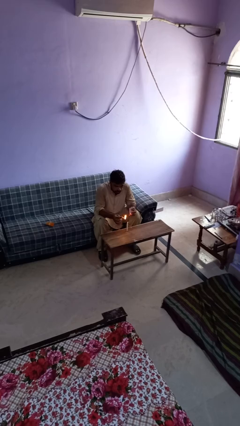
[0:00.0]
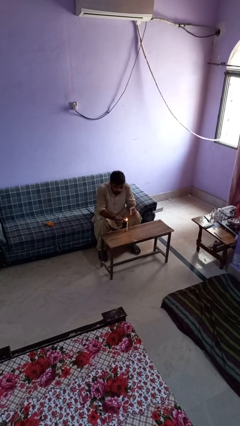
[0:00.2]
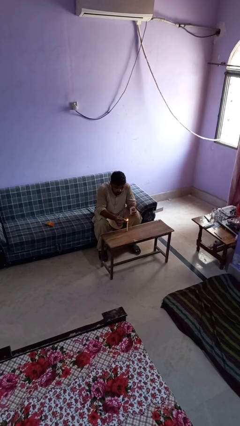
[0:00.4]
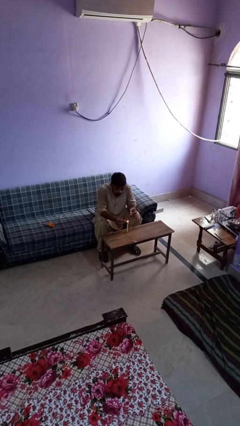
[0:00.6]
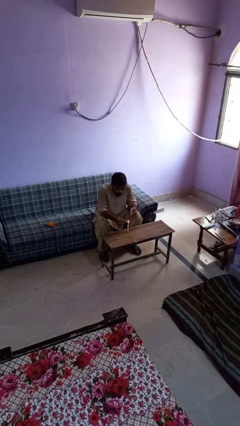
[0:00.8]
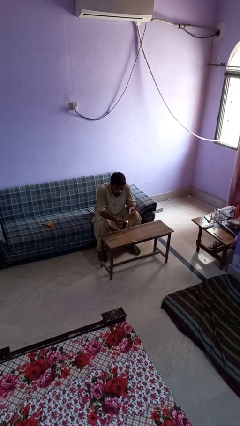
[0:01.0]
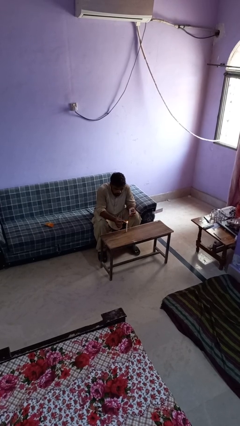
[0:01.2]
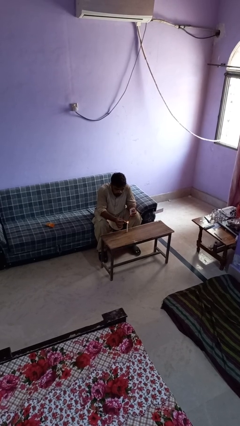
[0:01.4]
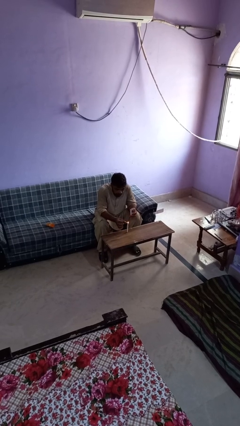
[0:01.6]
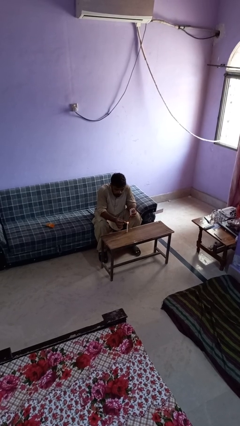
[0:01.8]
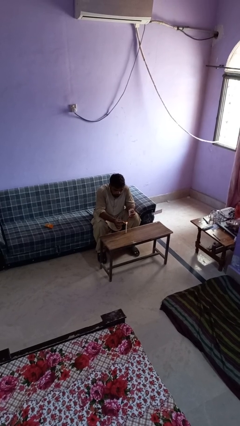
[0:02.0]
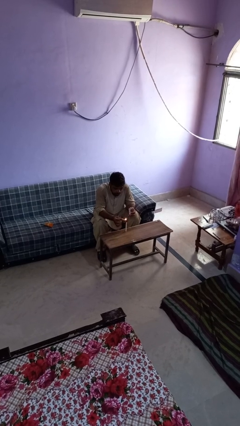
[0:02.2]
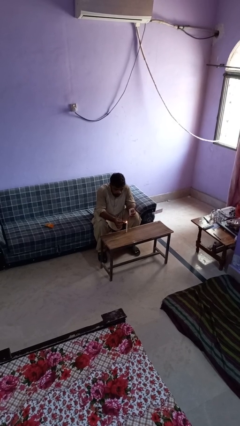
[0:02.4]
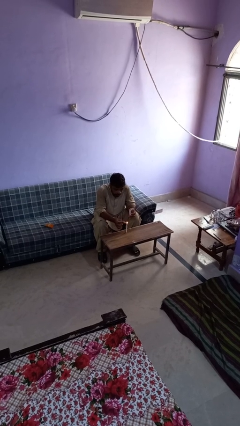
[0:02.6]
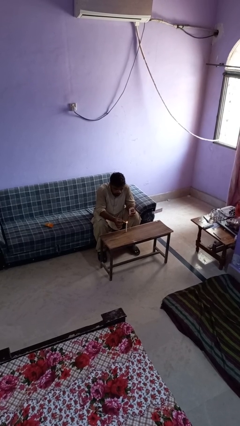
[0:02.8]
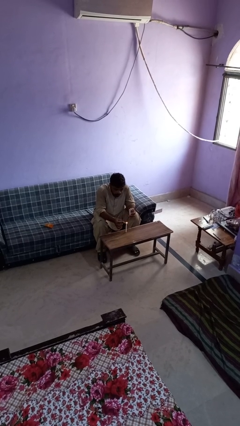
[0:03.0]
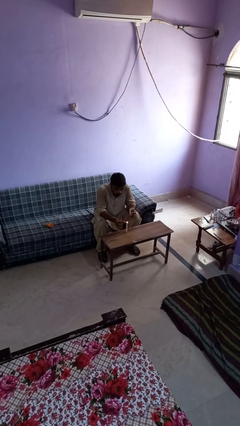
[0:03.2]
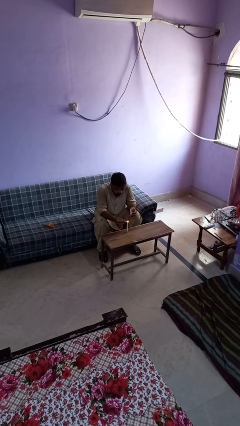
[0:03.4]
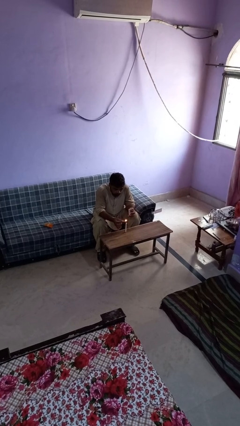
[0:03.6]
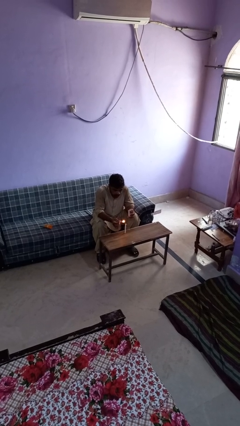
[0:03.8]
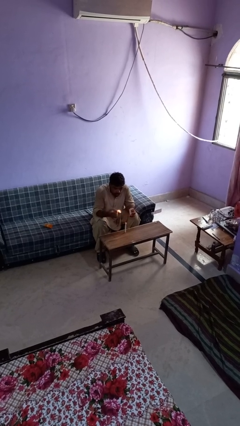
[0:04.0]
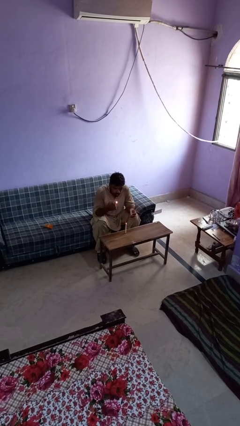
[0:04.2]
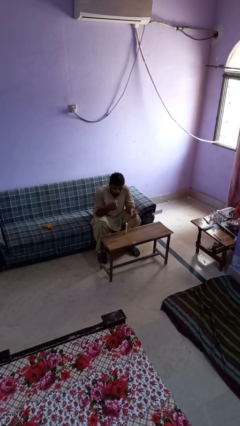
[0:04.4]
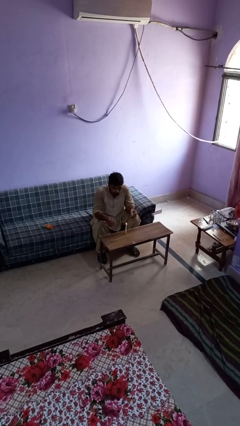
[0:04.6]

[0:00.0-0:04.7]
person lights candle

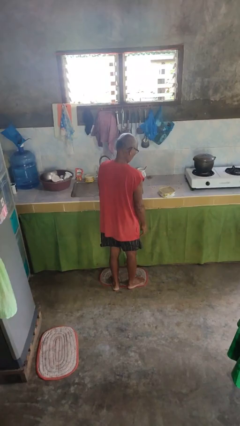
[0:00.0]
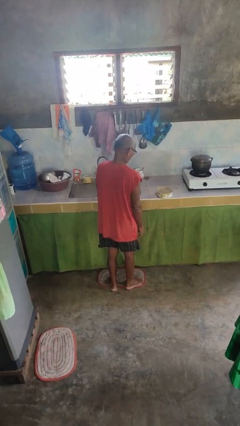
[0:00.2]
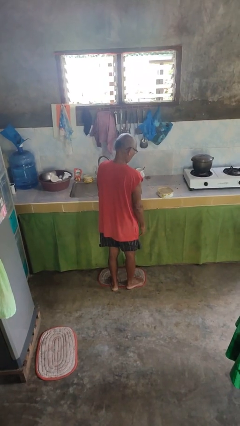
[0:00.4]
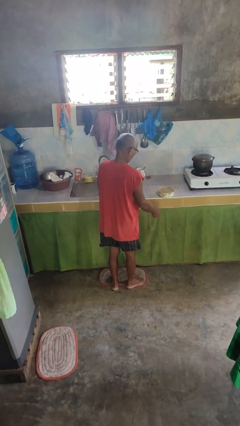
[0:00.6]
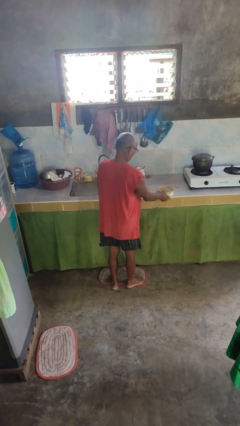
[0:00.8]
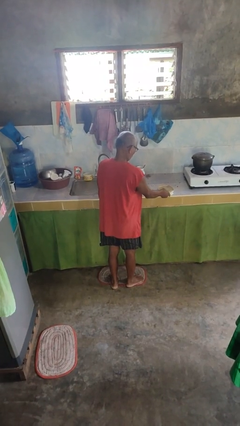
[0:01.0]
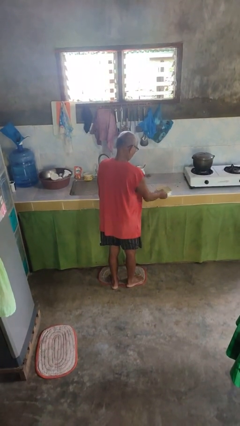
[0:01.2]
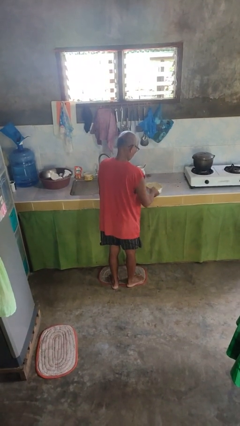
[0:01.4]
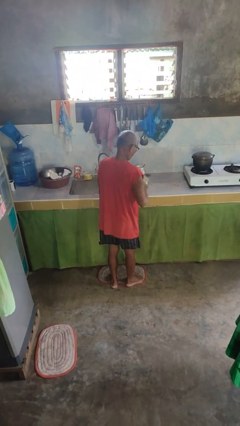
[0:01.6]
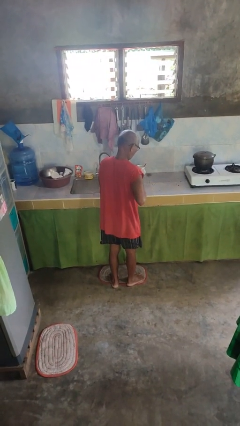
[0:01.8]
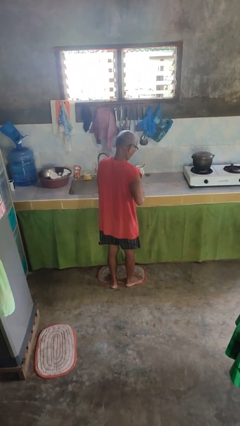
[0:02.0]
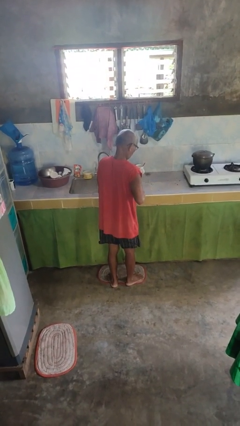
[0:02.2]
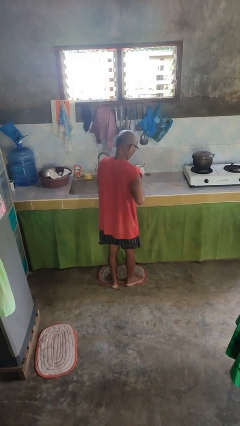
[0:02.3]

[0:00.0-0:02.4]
person picks up object from countertop

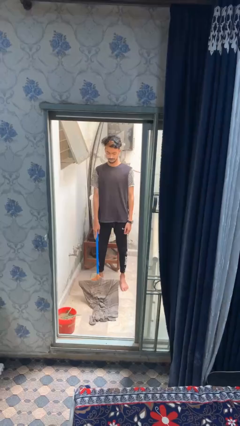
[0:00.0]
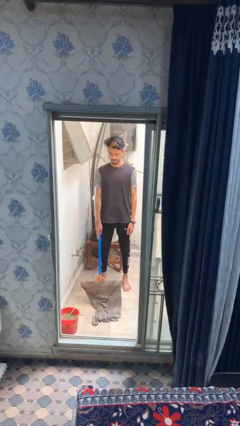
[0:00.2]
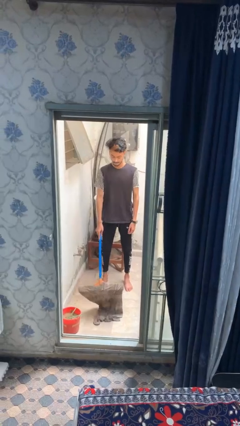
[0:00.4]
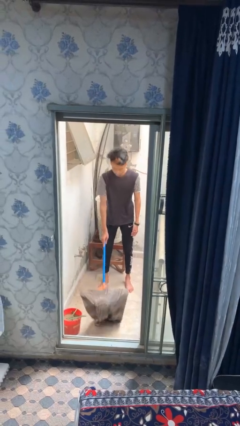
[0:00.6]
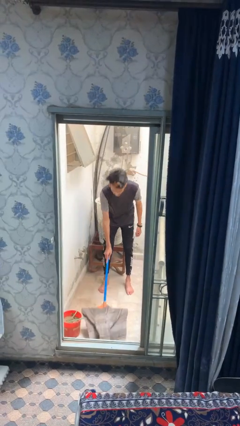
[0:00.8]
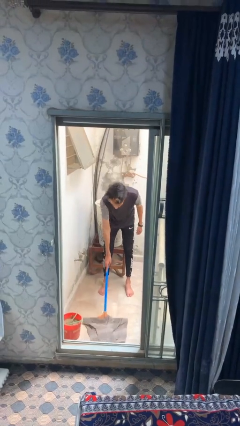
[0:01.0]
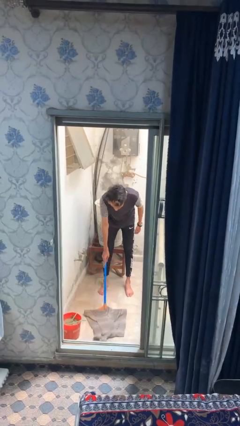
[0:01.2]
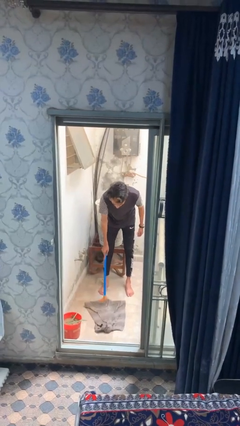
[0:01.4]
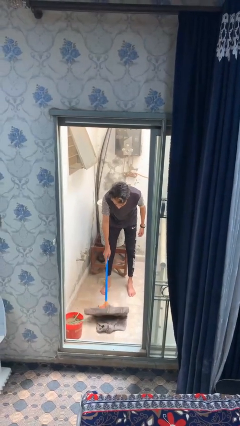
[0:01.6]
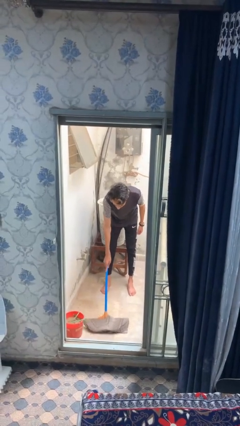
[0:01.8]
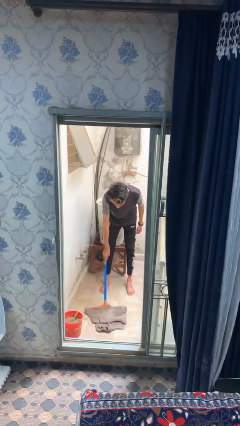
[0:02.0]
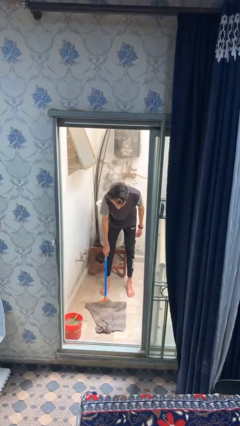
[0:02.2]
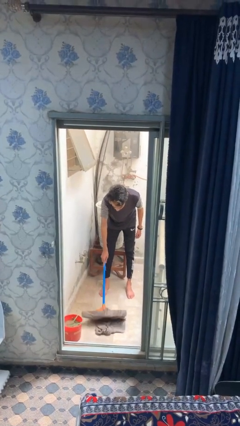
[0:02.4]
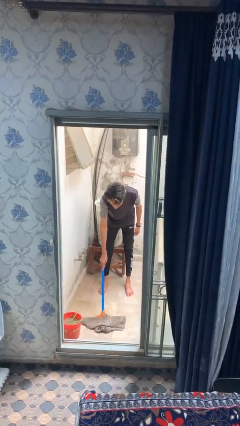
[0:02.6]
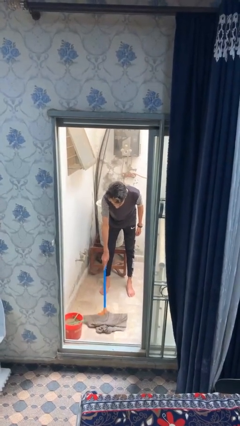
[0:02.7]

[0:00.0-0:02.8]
person mops

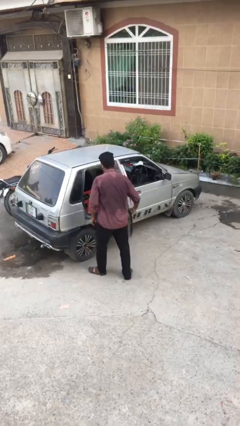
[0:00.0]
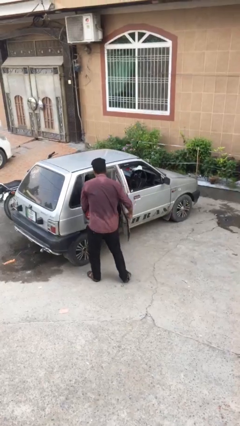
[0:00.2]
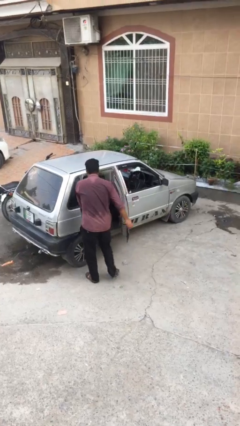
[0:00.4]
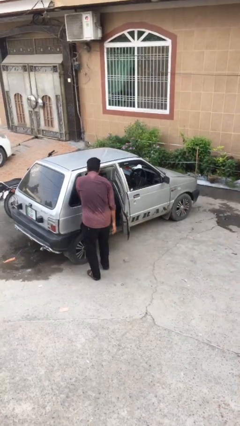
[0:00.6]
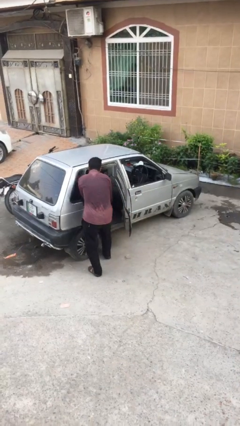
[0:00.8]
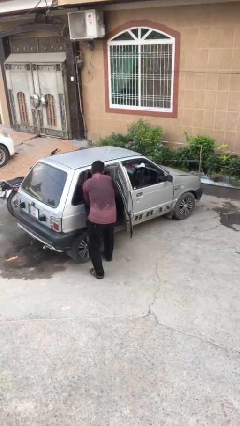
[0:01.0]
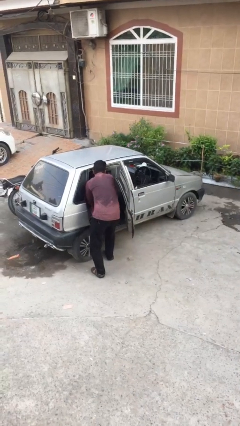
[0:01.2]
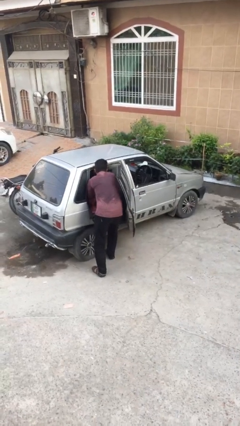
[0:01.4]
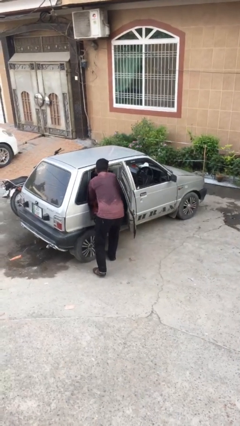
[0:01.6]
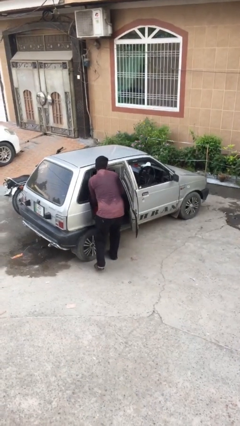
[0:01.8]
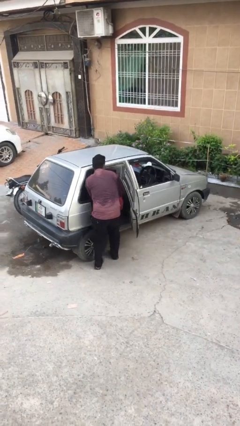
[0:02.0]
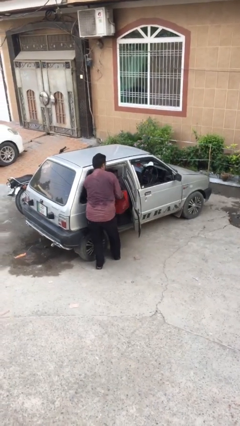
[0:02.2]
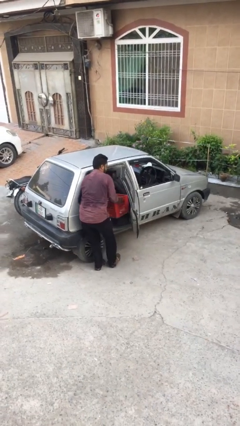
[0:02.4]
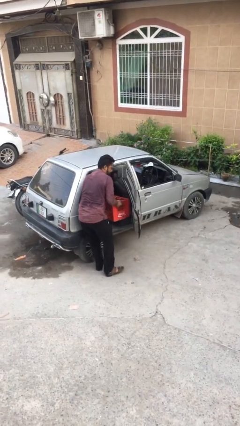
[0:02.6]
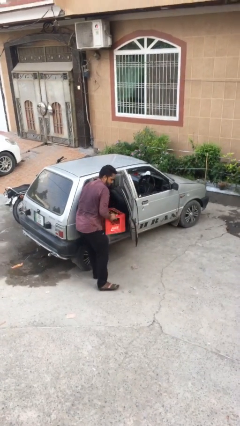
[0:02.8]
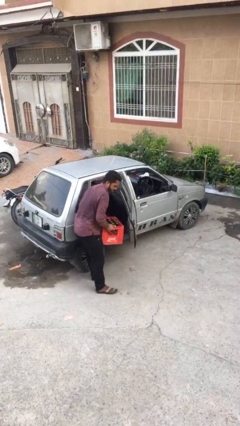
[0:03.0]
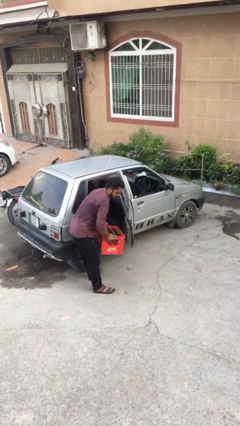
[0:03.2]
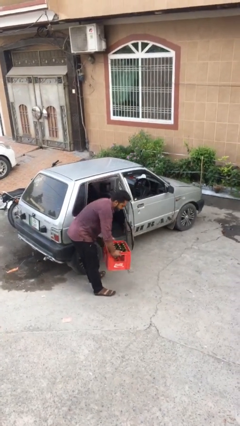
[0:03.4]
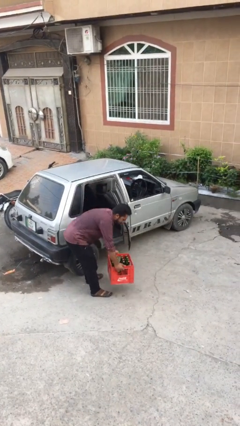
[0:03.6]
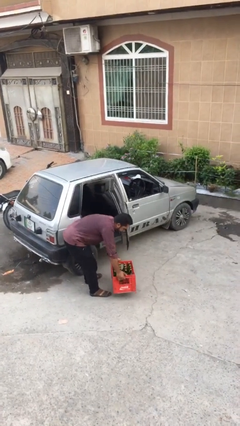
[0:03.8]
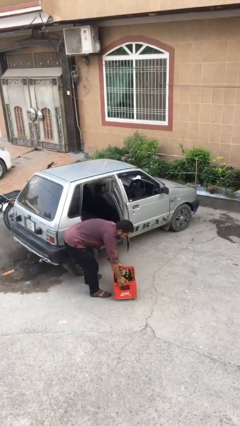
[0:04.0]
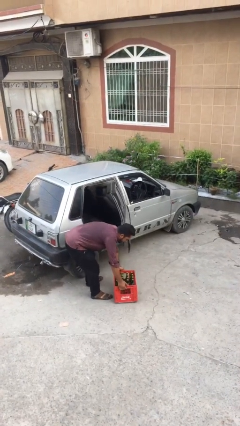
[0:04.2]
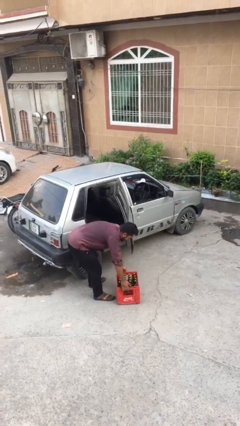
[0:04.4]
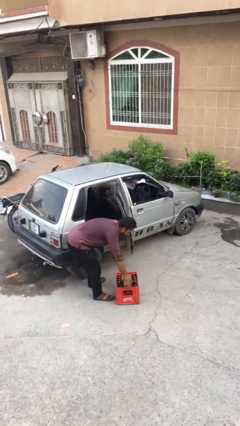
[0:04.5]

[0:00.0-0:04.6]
person unloads car

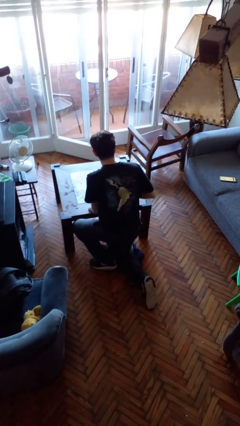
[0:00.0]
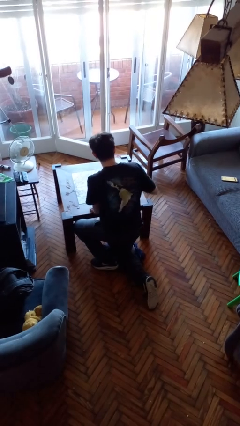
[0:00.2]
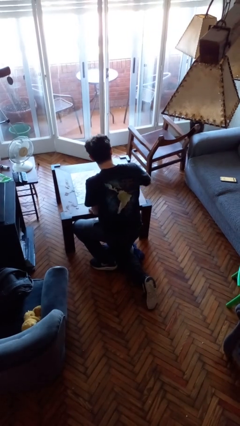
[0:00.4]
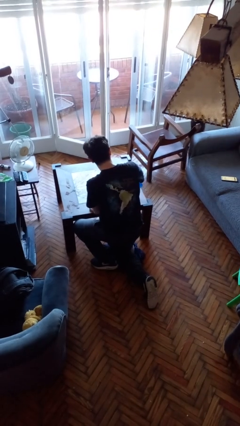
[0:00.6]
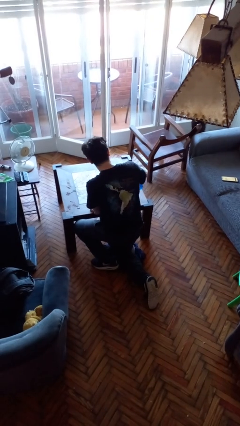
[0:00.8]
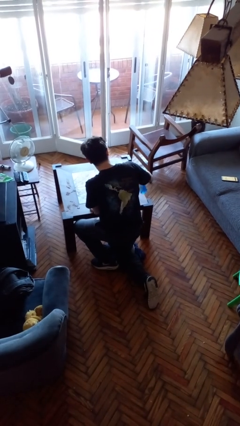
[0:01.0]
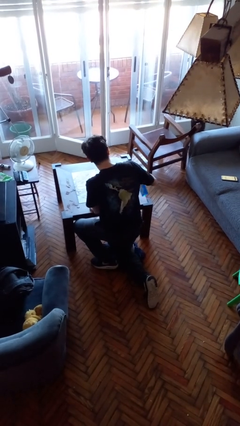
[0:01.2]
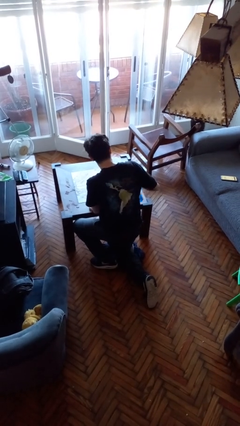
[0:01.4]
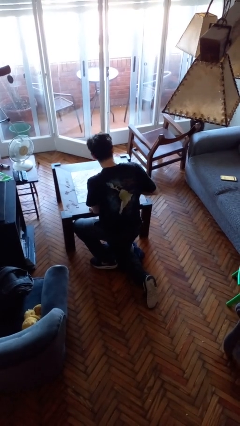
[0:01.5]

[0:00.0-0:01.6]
person sprays from bottle

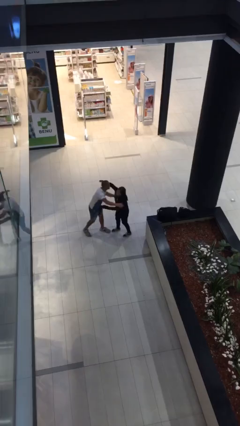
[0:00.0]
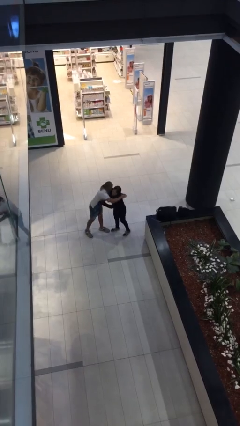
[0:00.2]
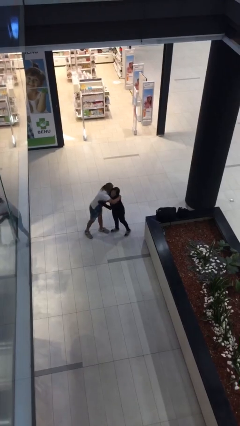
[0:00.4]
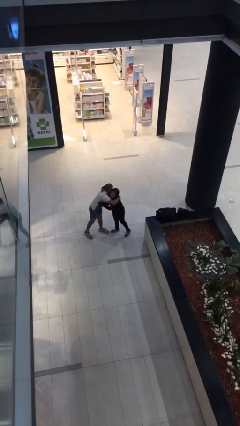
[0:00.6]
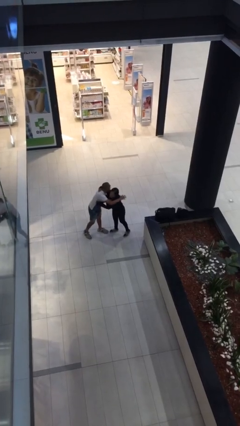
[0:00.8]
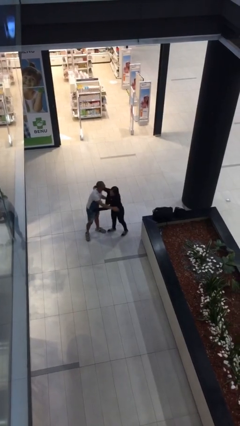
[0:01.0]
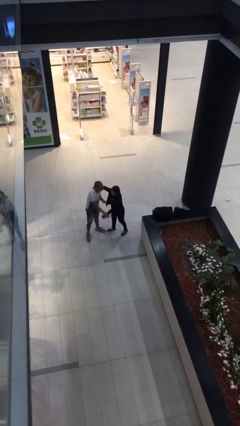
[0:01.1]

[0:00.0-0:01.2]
person embraces person

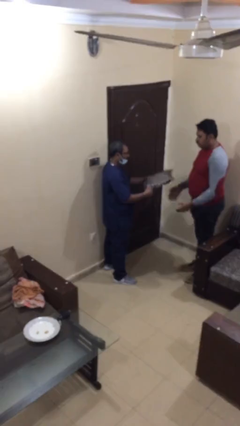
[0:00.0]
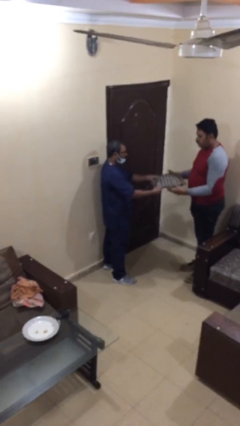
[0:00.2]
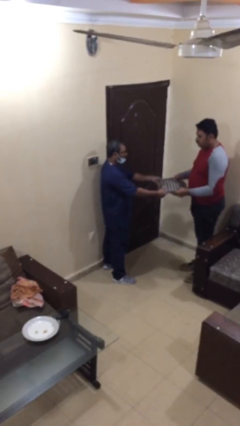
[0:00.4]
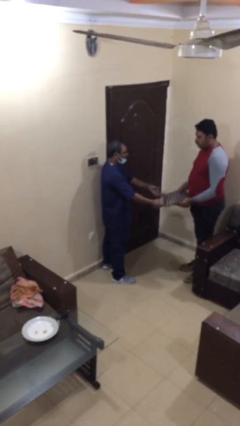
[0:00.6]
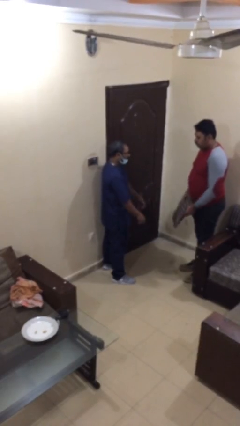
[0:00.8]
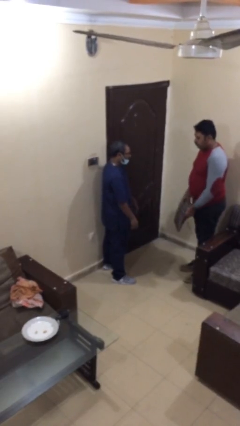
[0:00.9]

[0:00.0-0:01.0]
person transfers object to person
